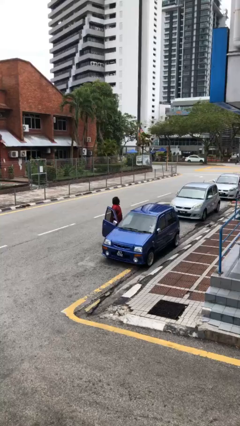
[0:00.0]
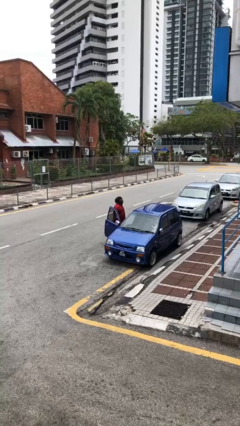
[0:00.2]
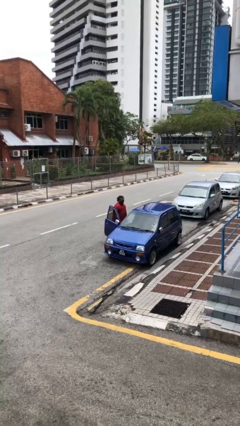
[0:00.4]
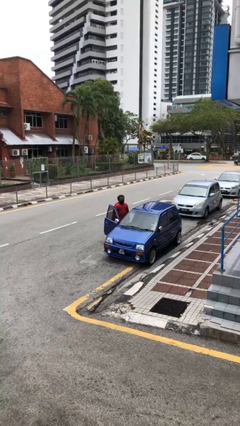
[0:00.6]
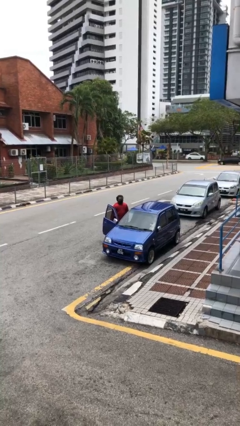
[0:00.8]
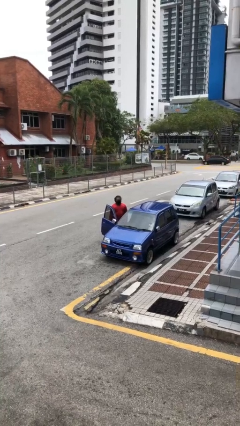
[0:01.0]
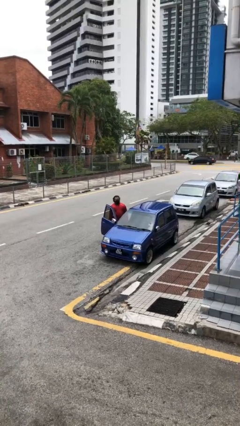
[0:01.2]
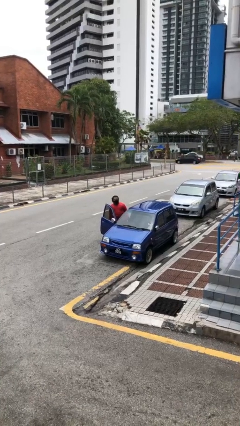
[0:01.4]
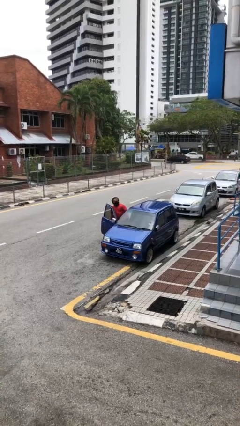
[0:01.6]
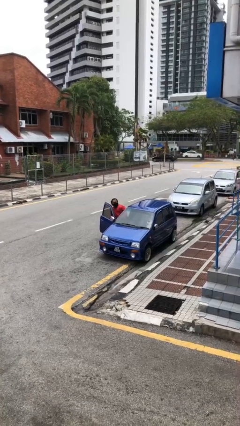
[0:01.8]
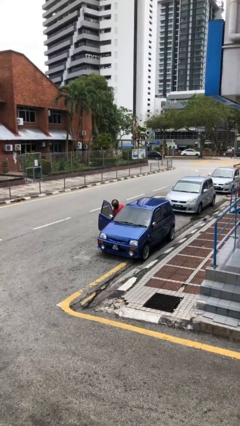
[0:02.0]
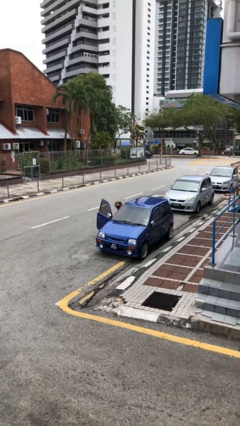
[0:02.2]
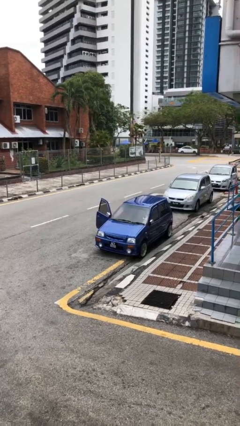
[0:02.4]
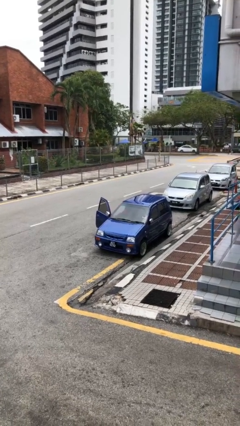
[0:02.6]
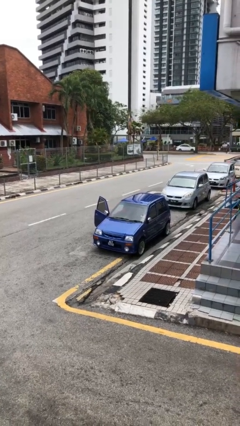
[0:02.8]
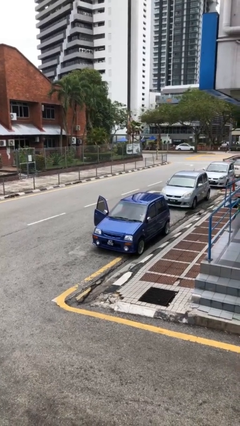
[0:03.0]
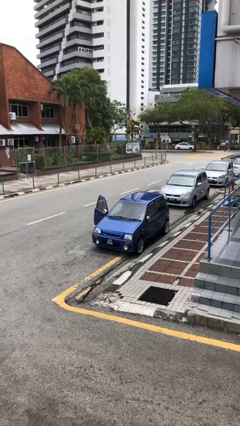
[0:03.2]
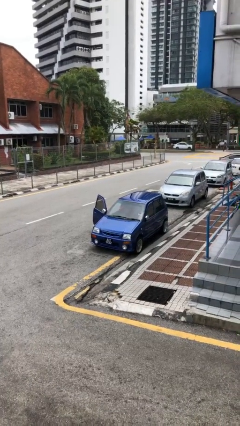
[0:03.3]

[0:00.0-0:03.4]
person enters car

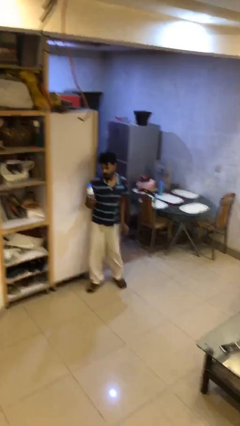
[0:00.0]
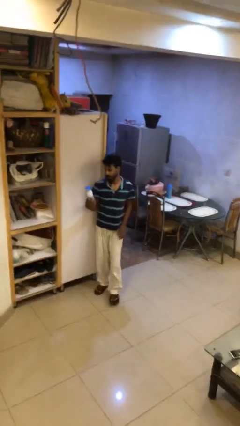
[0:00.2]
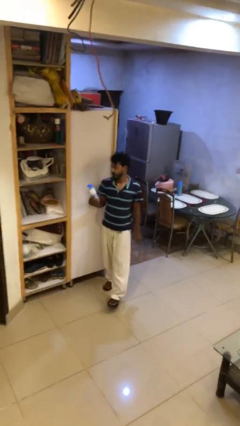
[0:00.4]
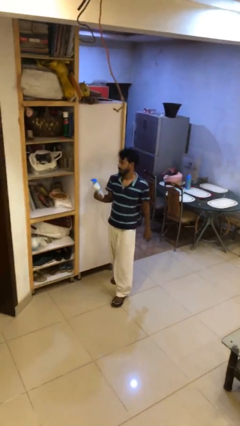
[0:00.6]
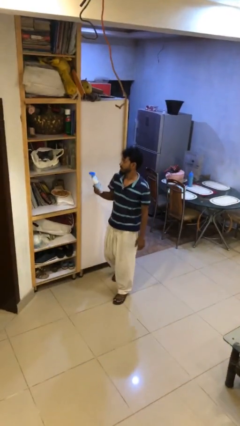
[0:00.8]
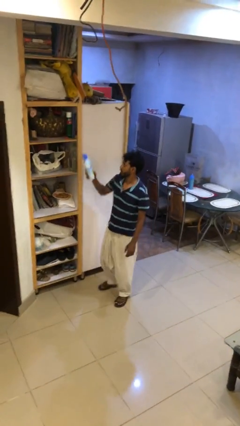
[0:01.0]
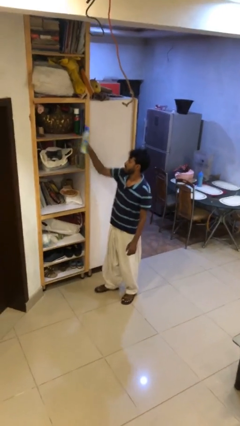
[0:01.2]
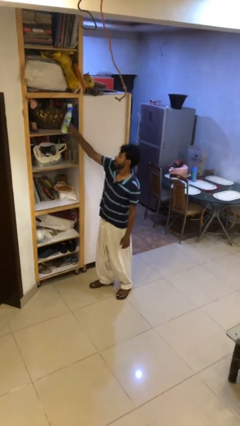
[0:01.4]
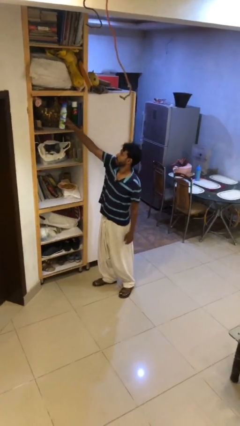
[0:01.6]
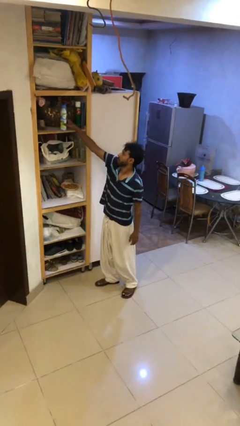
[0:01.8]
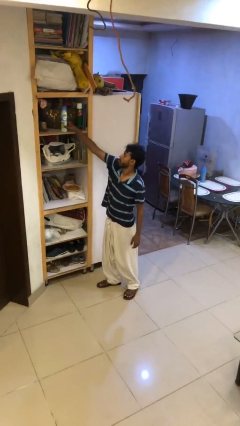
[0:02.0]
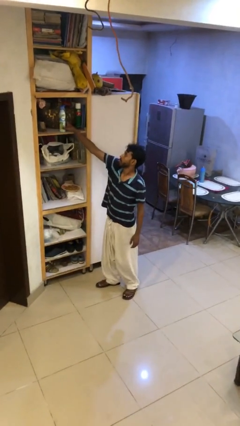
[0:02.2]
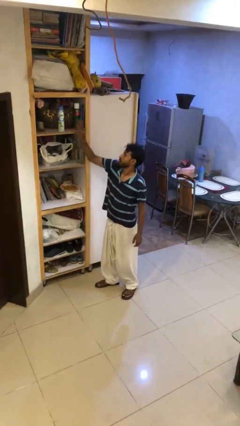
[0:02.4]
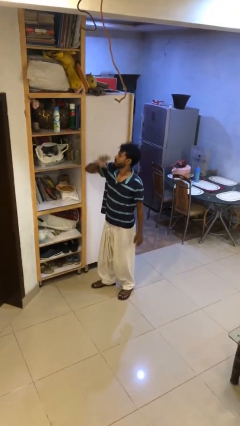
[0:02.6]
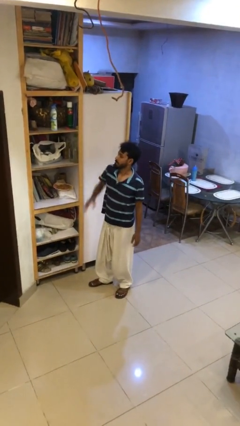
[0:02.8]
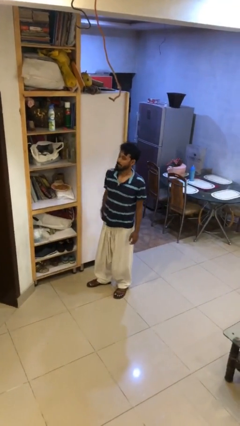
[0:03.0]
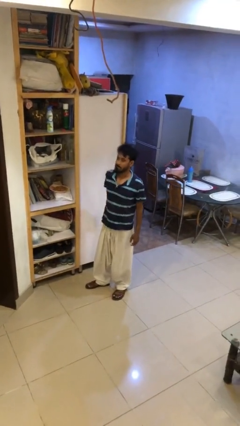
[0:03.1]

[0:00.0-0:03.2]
person puts down object on shelf

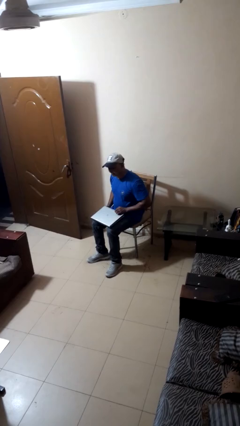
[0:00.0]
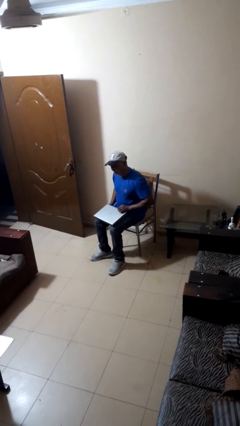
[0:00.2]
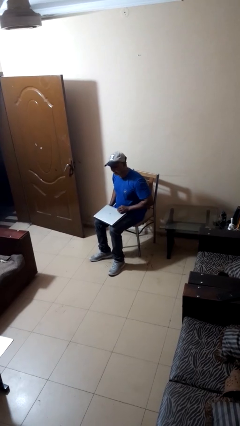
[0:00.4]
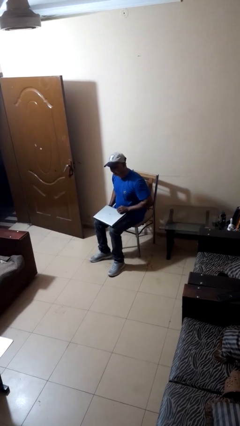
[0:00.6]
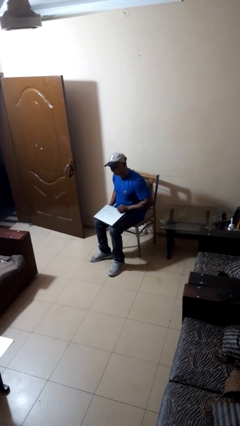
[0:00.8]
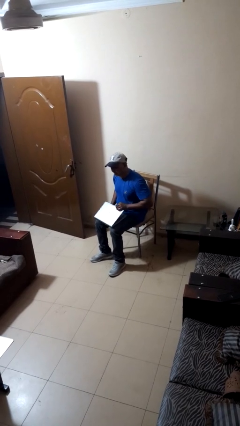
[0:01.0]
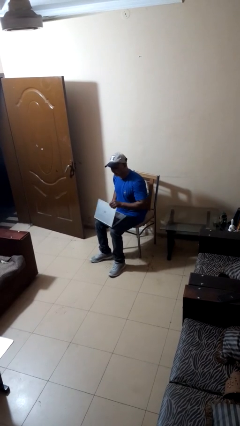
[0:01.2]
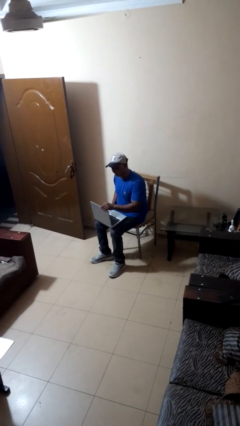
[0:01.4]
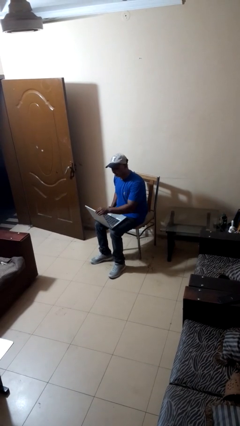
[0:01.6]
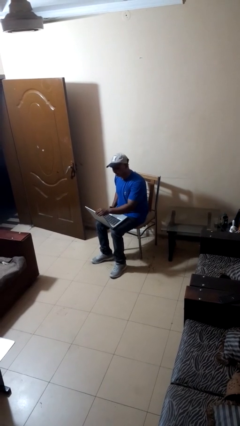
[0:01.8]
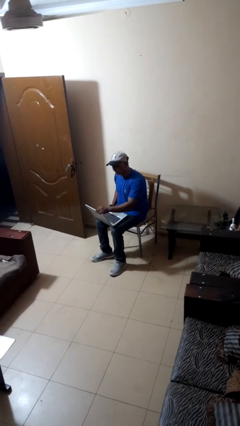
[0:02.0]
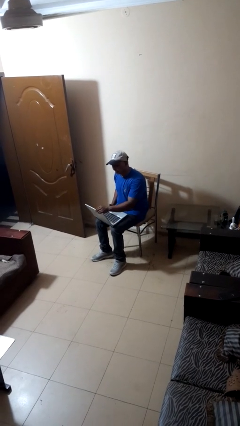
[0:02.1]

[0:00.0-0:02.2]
person opens laptop

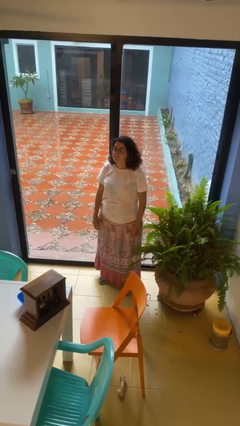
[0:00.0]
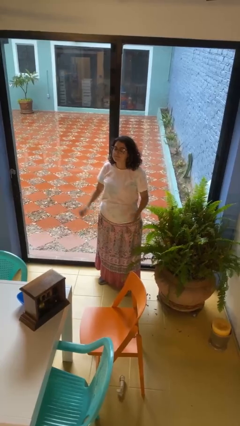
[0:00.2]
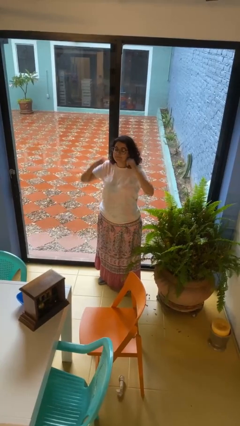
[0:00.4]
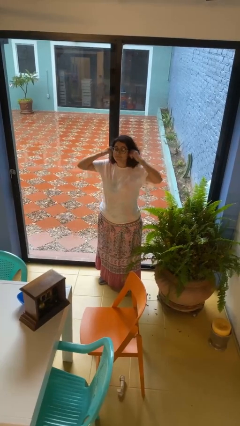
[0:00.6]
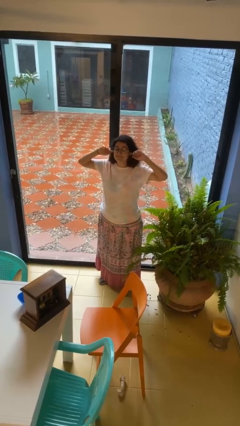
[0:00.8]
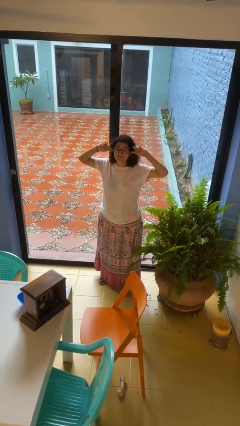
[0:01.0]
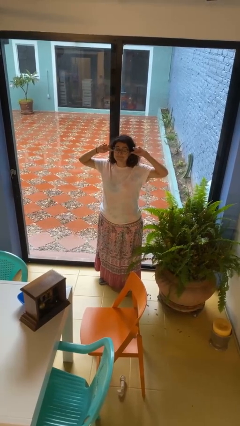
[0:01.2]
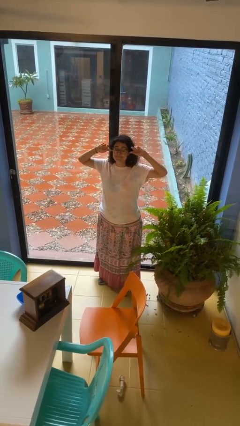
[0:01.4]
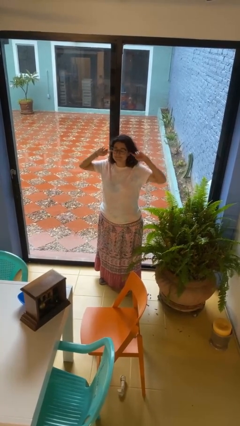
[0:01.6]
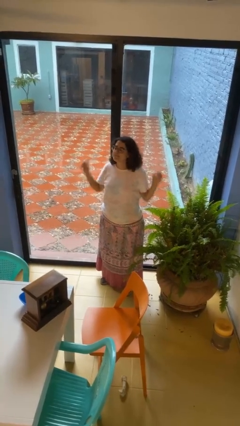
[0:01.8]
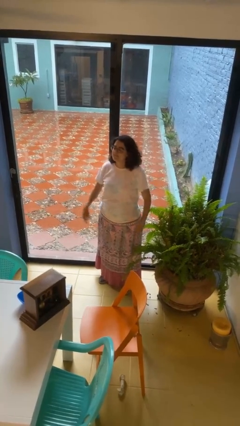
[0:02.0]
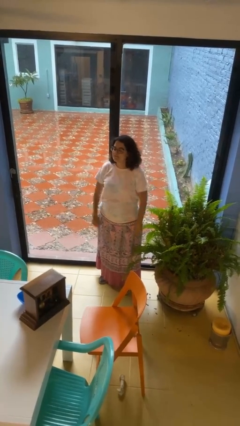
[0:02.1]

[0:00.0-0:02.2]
person puts fingers in ear

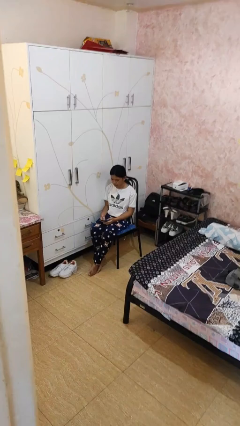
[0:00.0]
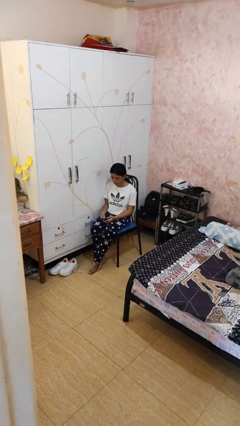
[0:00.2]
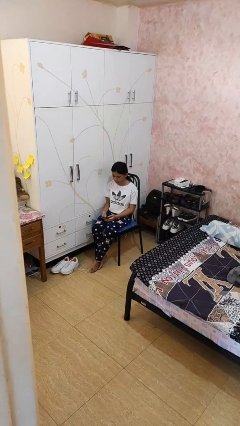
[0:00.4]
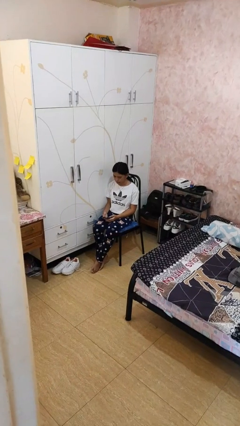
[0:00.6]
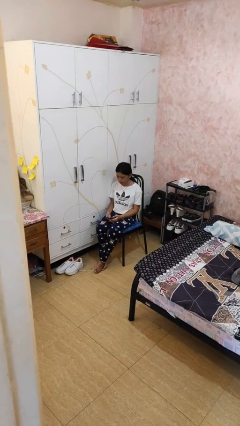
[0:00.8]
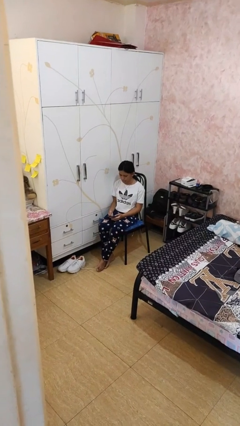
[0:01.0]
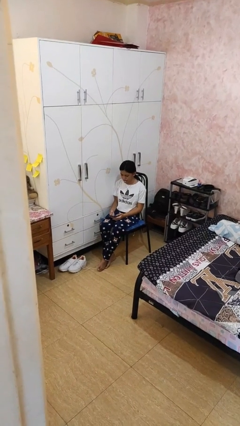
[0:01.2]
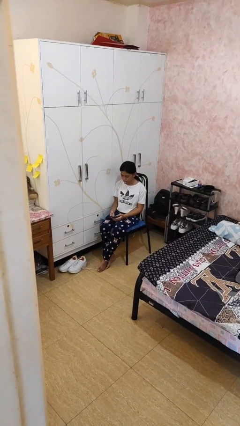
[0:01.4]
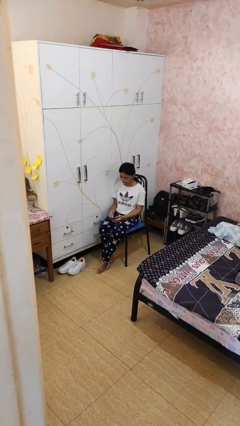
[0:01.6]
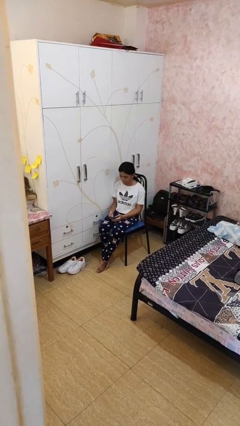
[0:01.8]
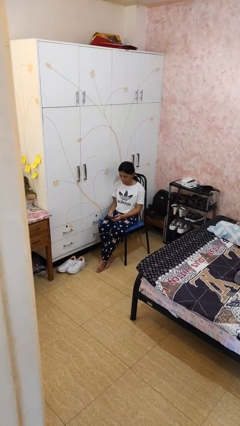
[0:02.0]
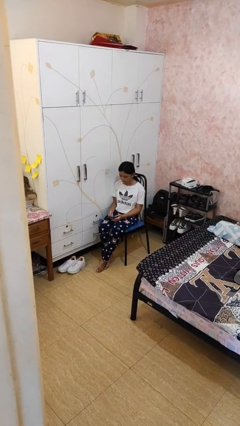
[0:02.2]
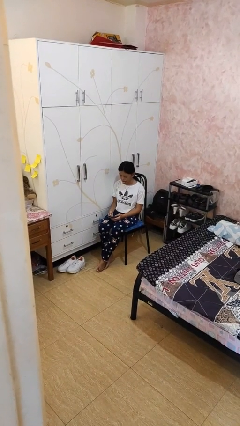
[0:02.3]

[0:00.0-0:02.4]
person sticks out tongue

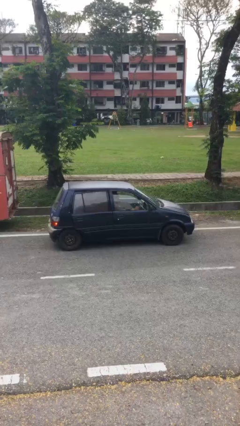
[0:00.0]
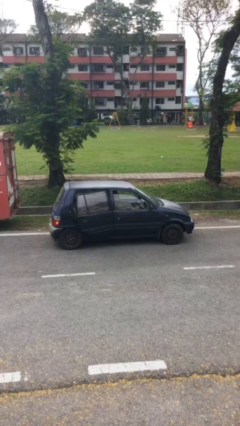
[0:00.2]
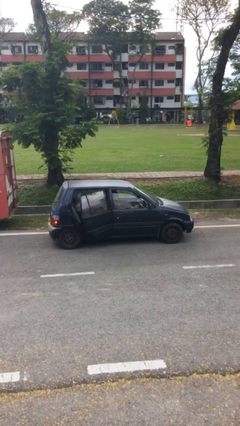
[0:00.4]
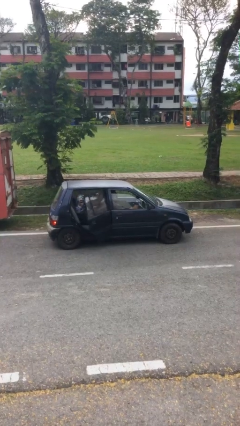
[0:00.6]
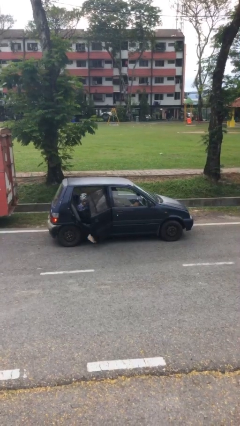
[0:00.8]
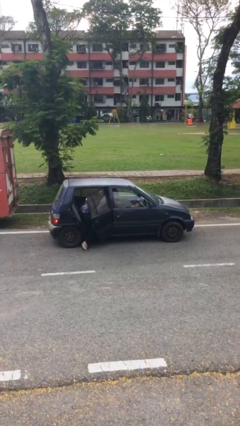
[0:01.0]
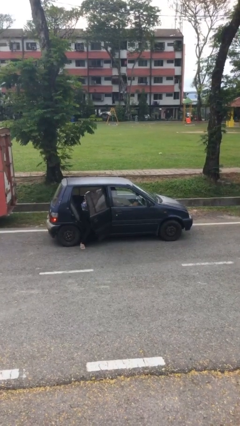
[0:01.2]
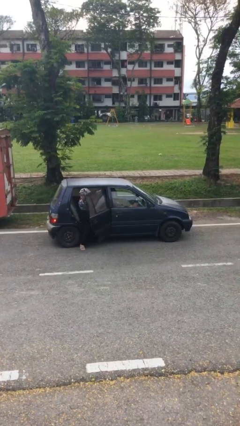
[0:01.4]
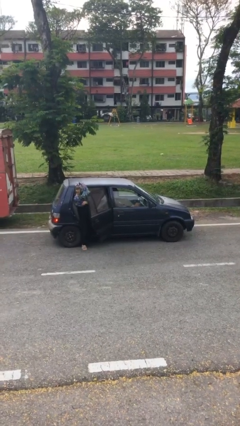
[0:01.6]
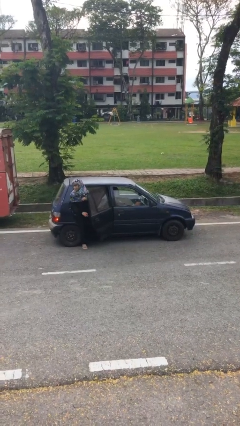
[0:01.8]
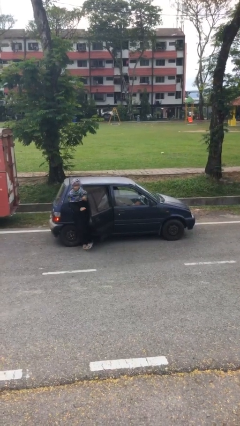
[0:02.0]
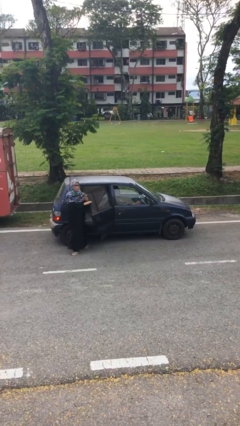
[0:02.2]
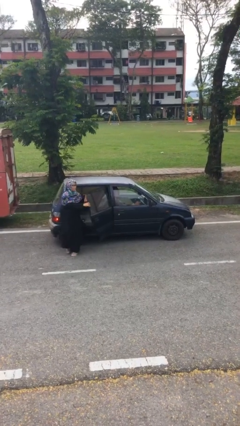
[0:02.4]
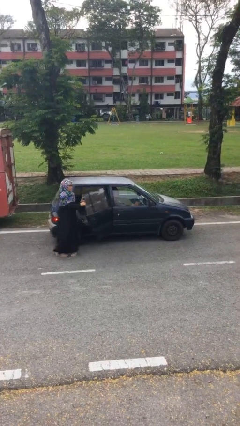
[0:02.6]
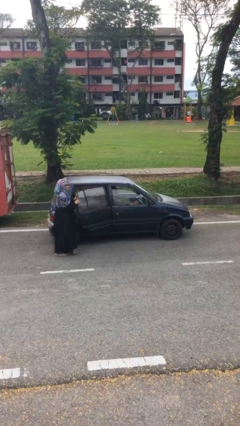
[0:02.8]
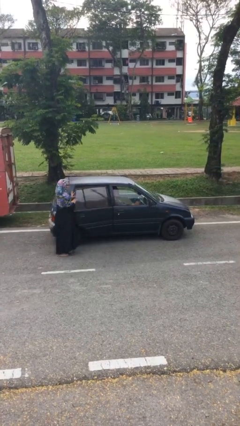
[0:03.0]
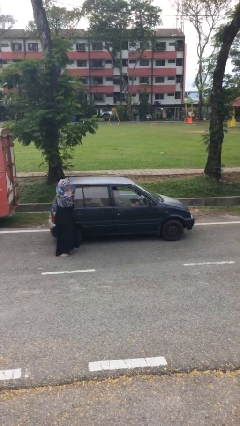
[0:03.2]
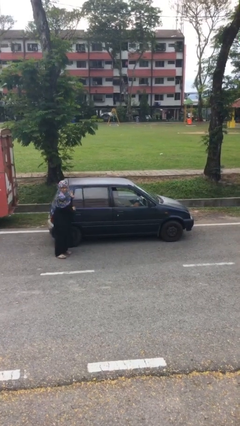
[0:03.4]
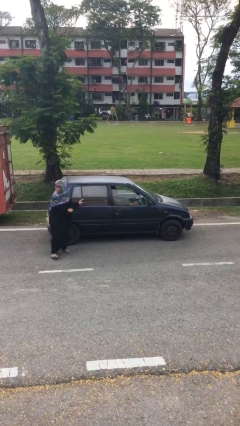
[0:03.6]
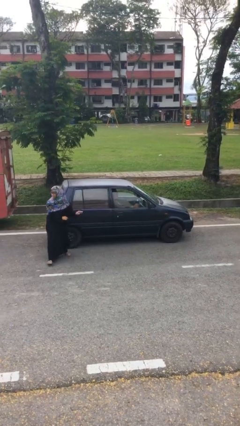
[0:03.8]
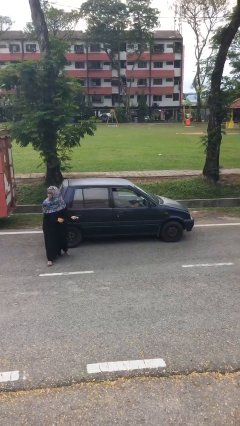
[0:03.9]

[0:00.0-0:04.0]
car drops off person
